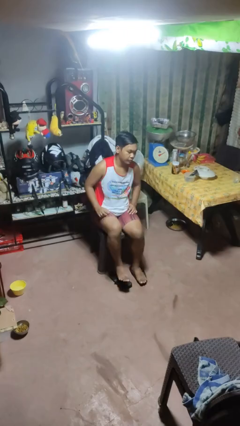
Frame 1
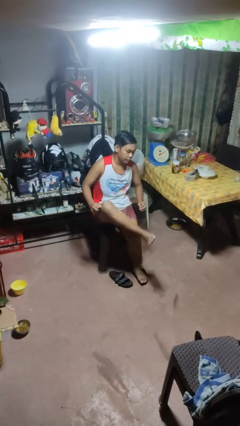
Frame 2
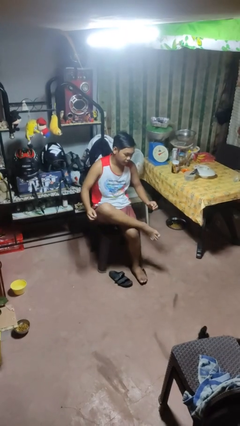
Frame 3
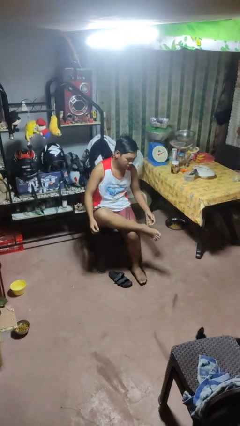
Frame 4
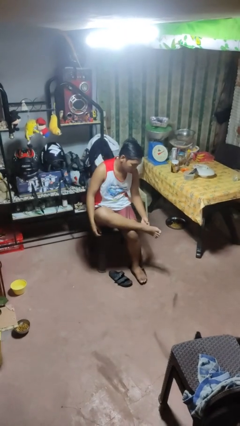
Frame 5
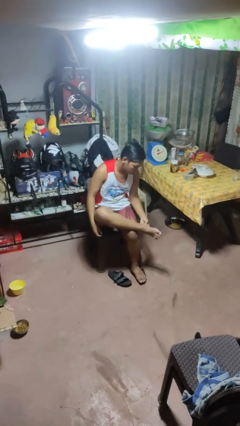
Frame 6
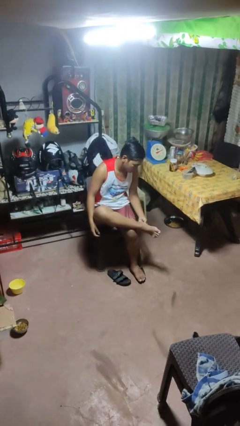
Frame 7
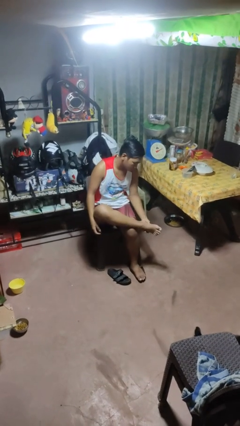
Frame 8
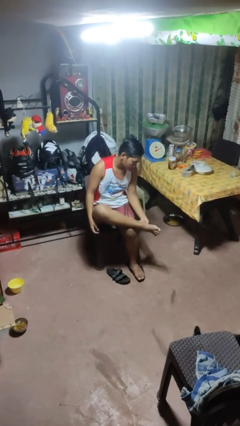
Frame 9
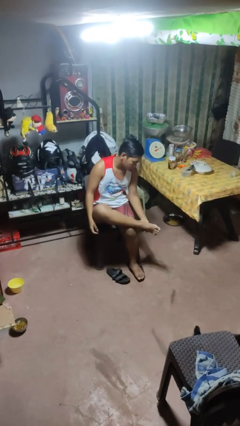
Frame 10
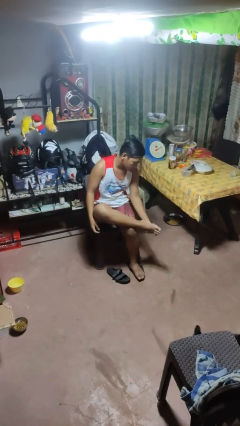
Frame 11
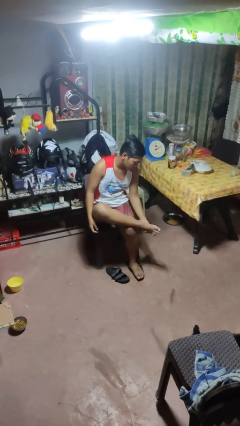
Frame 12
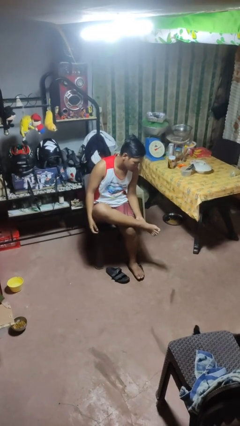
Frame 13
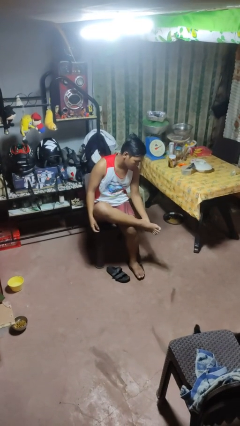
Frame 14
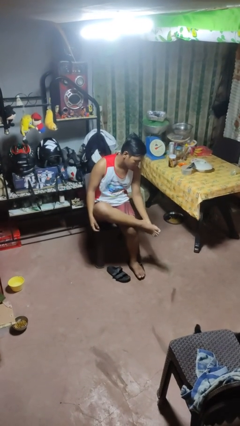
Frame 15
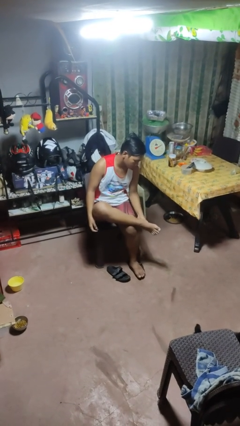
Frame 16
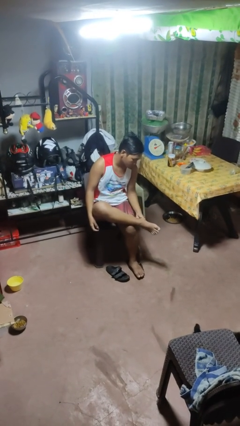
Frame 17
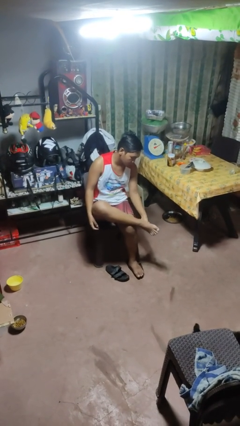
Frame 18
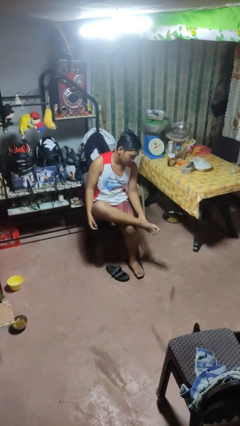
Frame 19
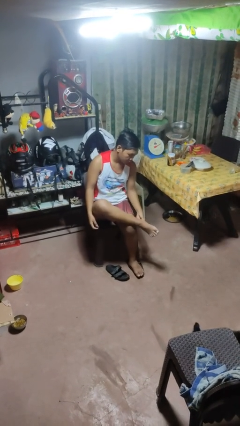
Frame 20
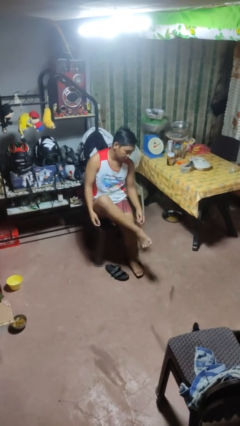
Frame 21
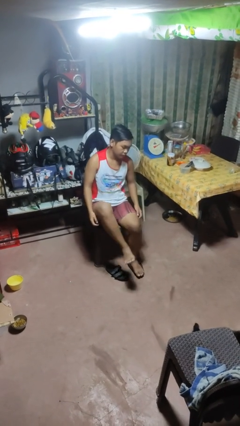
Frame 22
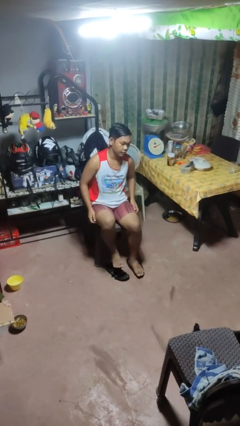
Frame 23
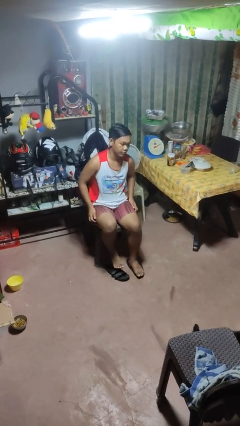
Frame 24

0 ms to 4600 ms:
person rubs foot

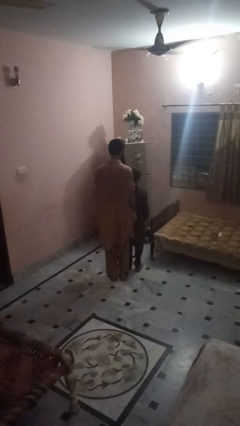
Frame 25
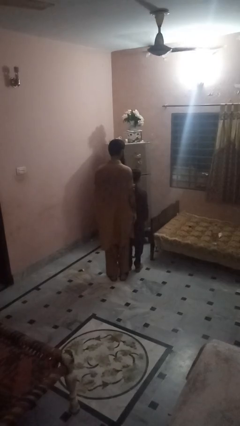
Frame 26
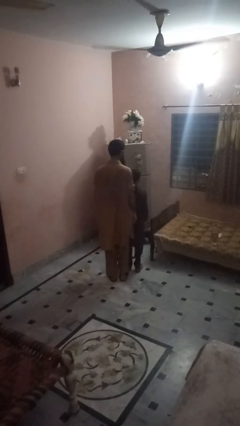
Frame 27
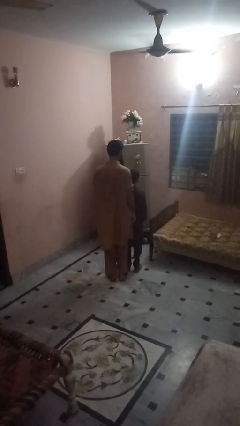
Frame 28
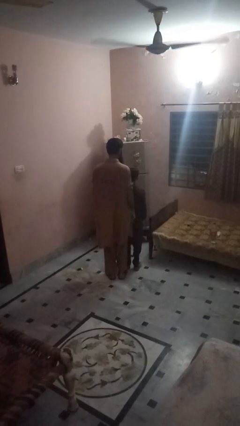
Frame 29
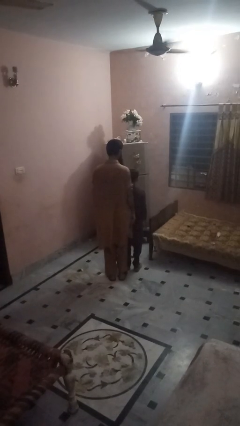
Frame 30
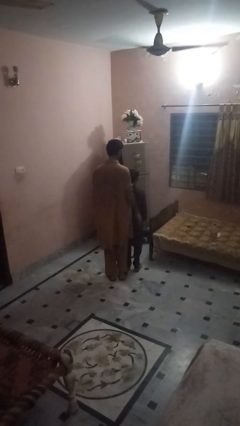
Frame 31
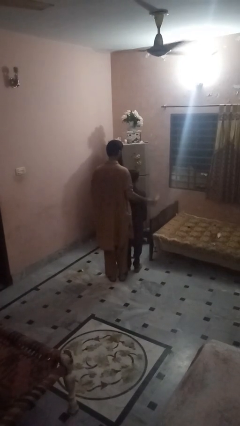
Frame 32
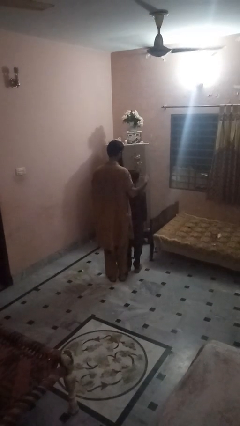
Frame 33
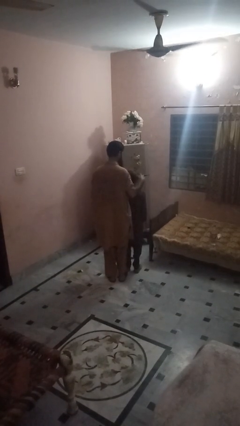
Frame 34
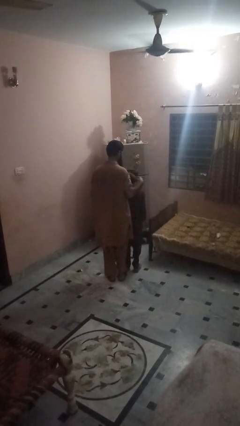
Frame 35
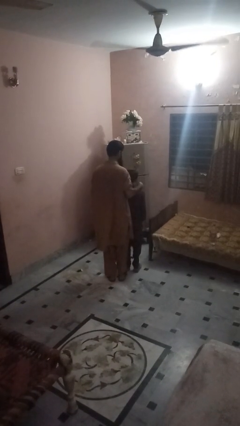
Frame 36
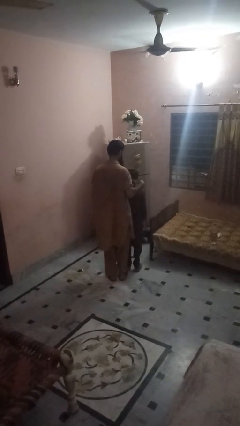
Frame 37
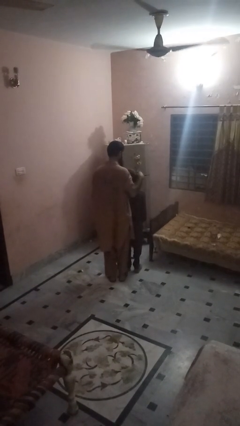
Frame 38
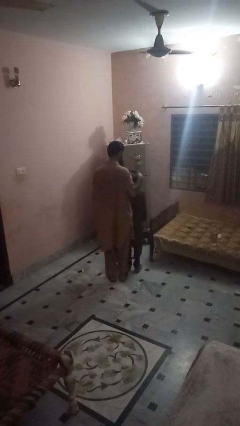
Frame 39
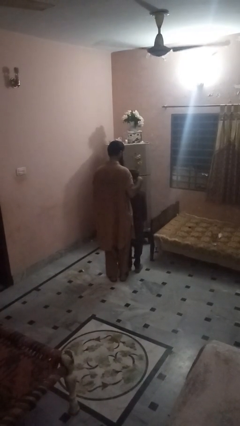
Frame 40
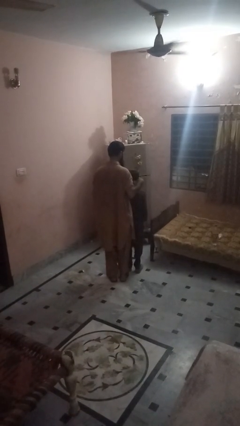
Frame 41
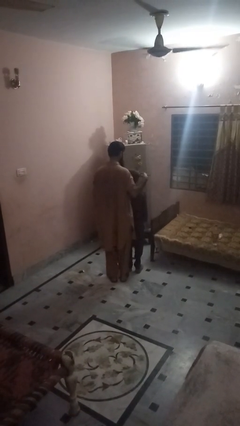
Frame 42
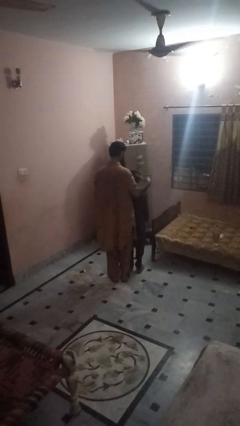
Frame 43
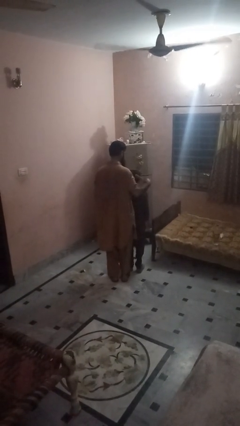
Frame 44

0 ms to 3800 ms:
person brushes hair of person

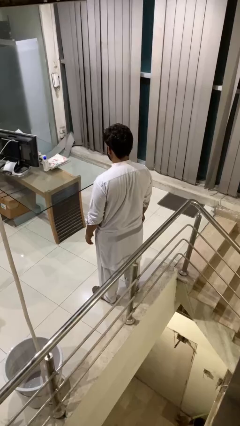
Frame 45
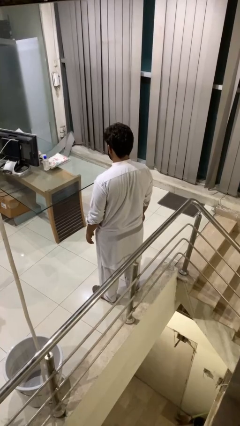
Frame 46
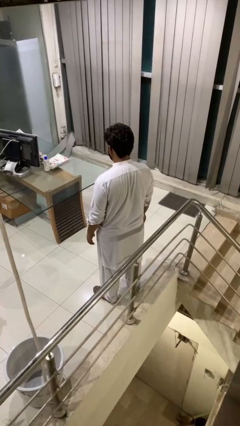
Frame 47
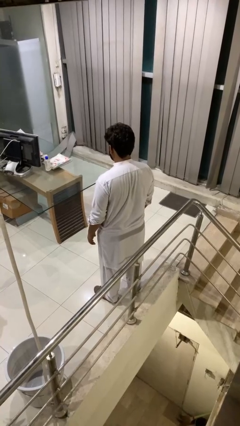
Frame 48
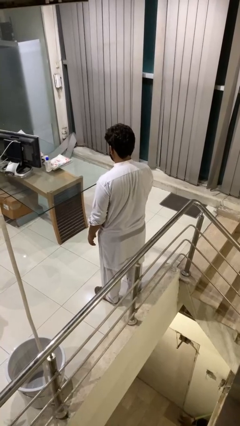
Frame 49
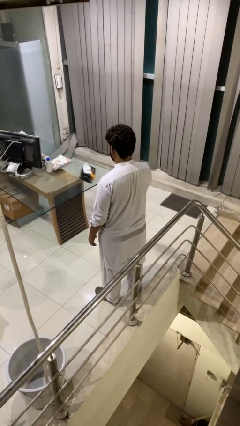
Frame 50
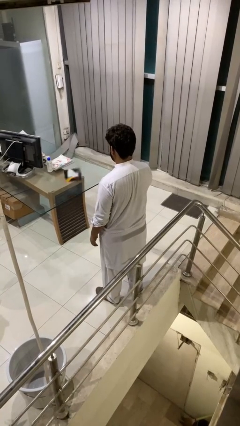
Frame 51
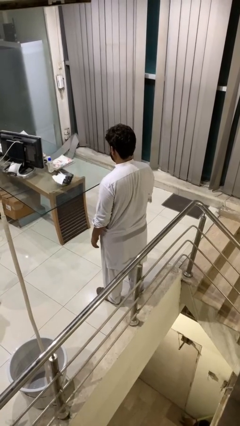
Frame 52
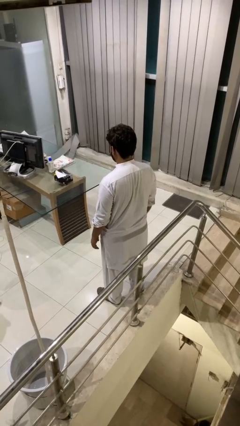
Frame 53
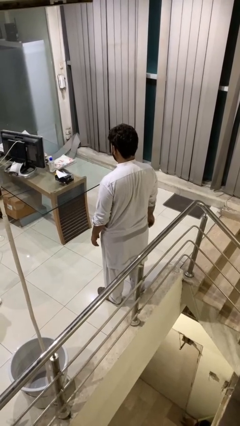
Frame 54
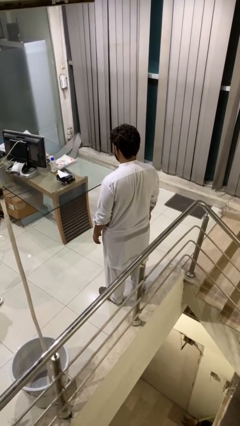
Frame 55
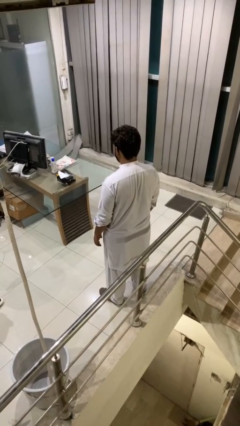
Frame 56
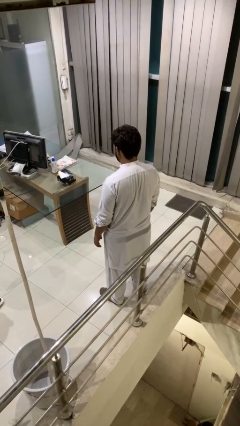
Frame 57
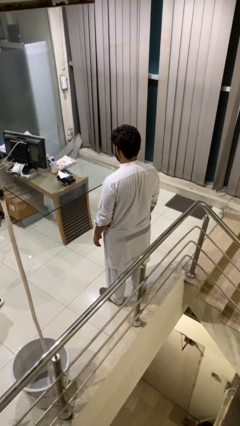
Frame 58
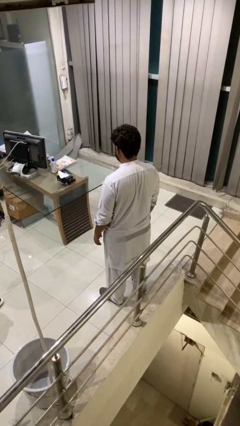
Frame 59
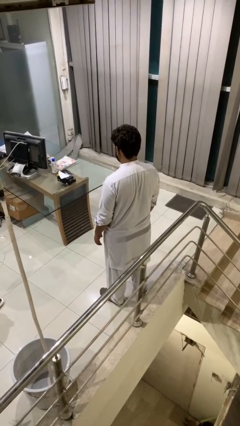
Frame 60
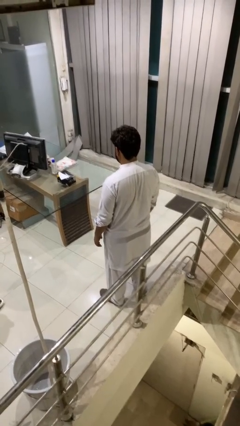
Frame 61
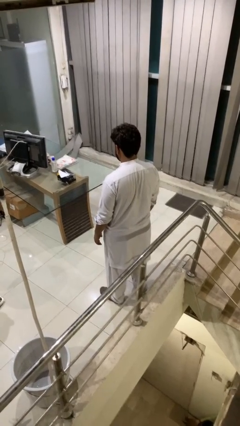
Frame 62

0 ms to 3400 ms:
person throws object on table

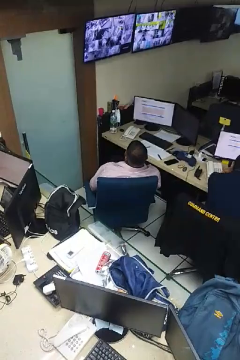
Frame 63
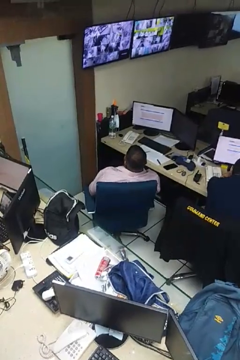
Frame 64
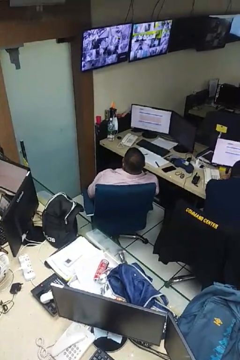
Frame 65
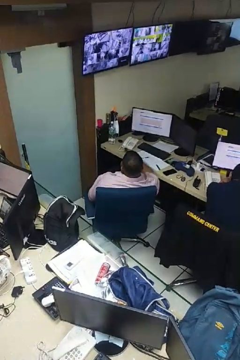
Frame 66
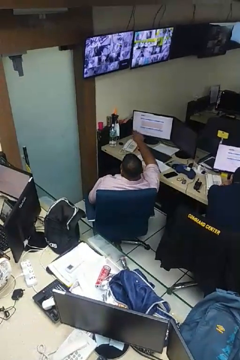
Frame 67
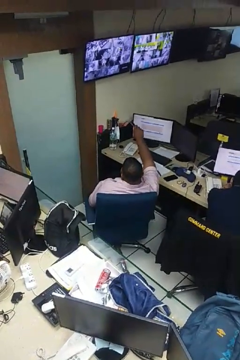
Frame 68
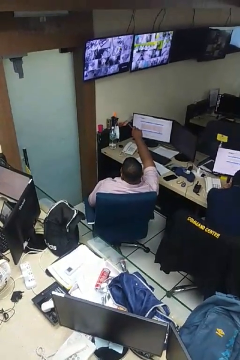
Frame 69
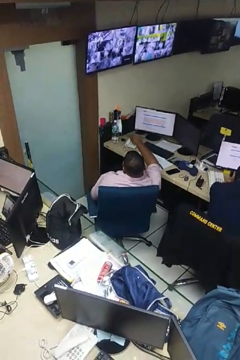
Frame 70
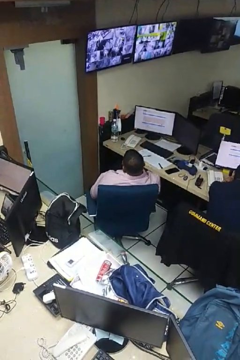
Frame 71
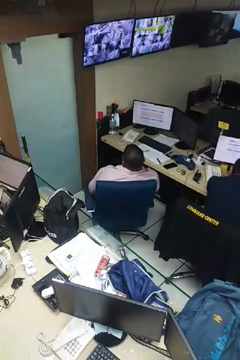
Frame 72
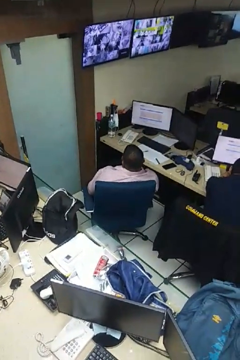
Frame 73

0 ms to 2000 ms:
person uses television remote

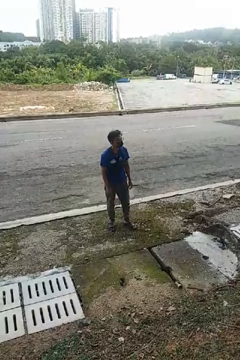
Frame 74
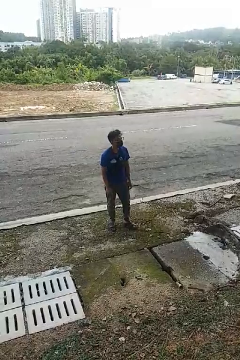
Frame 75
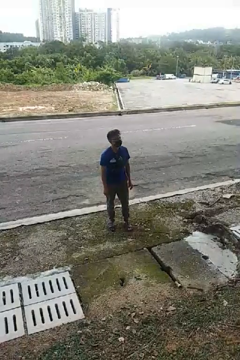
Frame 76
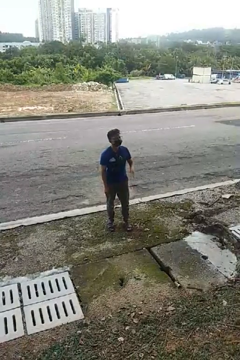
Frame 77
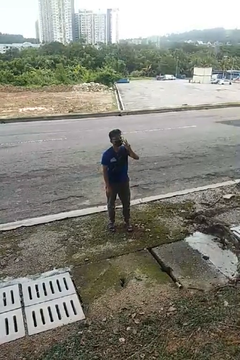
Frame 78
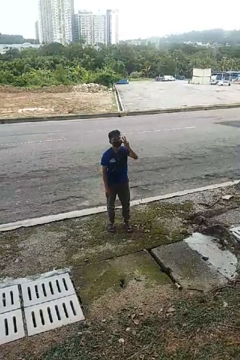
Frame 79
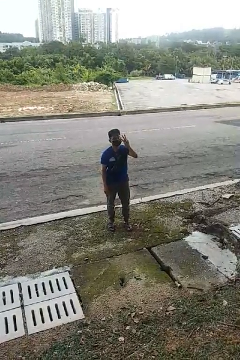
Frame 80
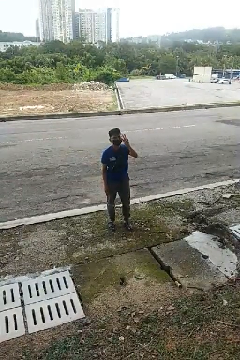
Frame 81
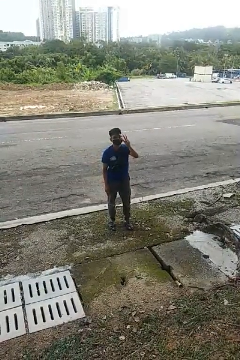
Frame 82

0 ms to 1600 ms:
person gestures number three

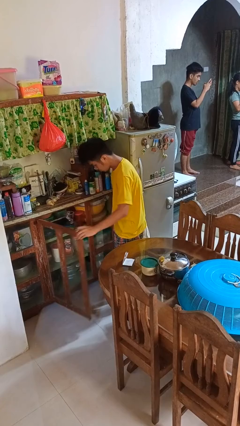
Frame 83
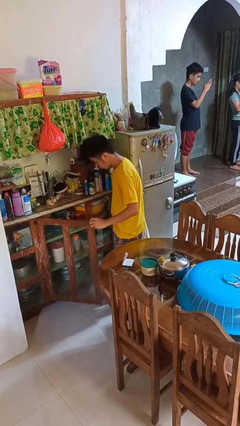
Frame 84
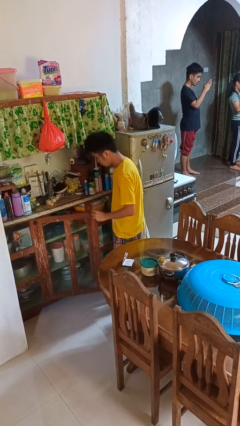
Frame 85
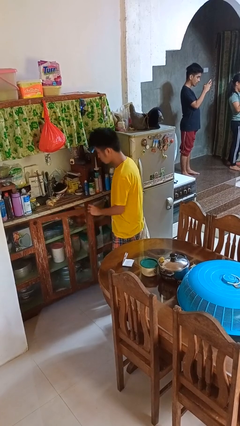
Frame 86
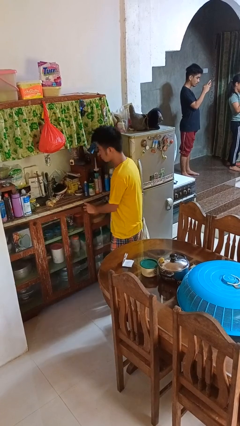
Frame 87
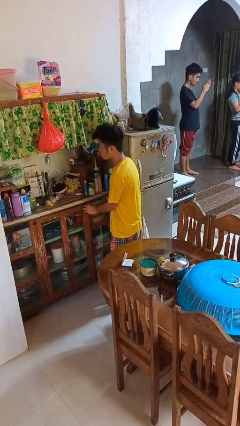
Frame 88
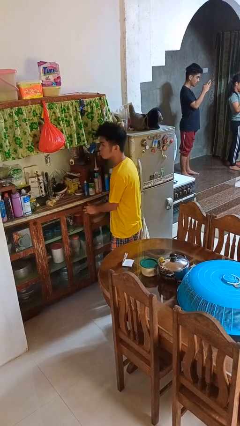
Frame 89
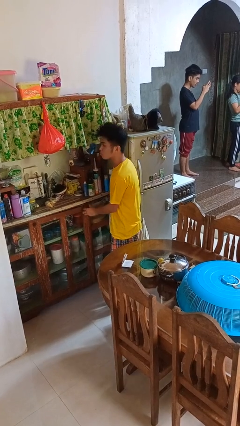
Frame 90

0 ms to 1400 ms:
person closes cabinet

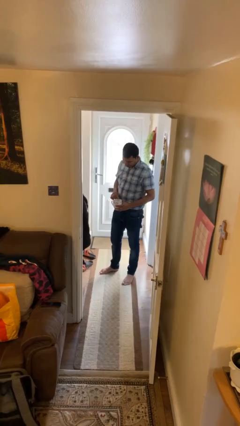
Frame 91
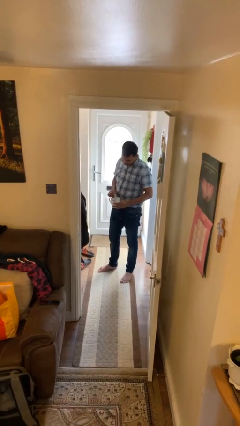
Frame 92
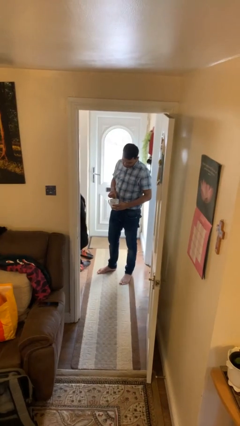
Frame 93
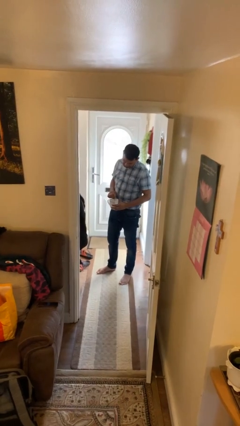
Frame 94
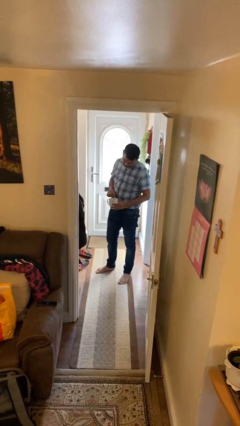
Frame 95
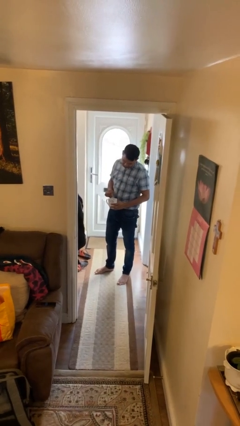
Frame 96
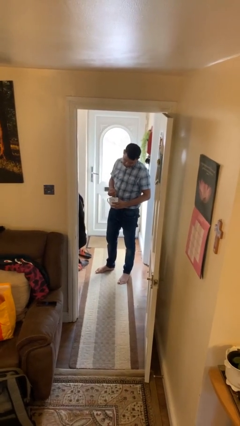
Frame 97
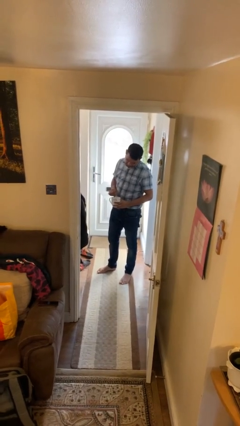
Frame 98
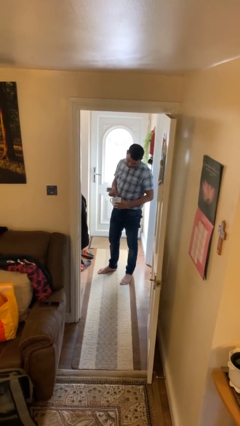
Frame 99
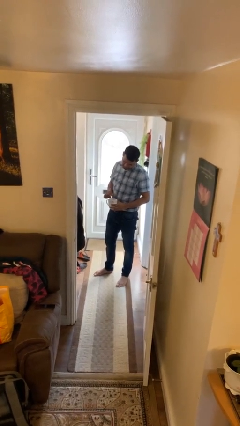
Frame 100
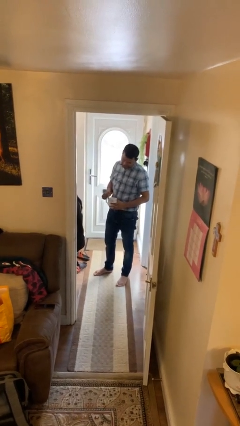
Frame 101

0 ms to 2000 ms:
person stirs mug
